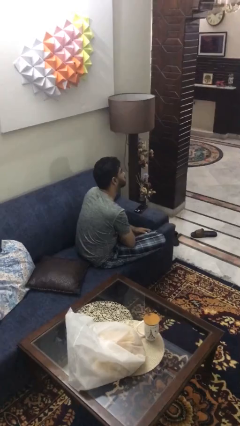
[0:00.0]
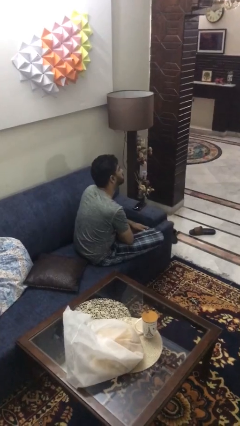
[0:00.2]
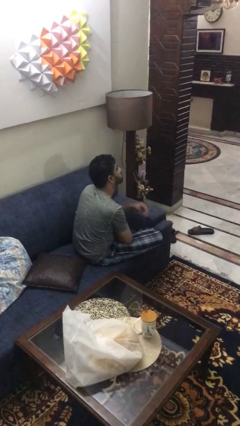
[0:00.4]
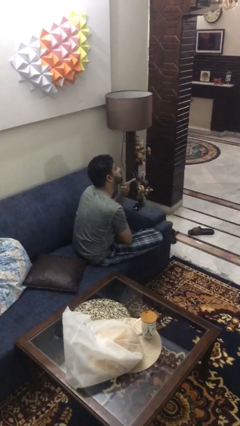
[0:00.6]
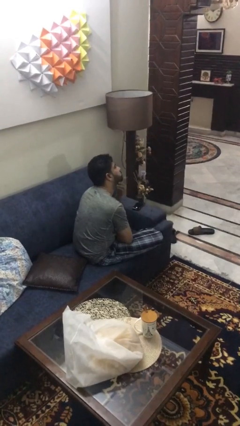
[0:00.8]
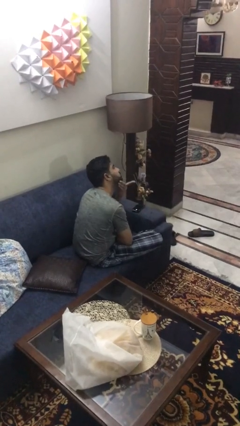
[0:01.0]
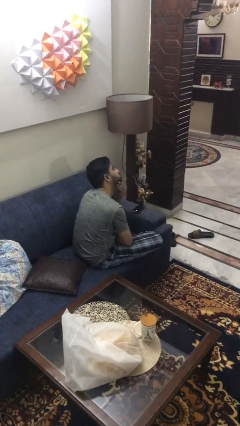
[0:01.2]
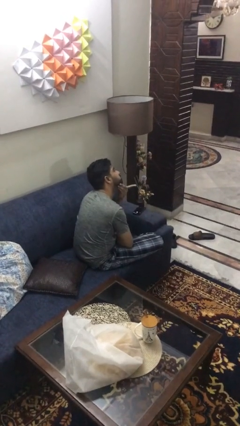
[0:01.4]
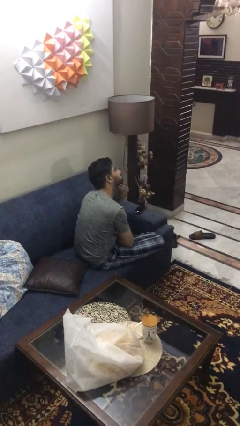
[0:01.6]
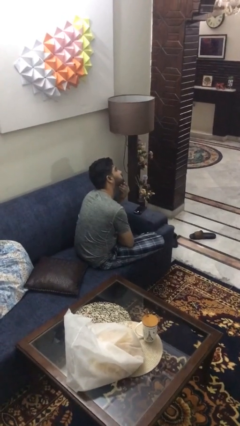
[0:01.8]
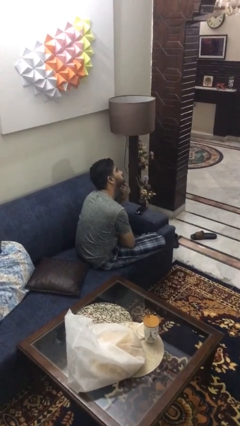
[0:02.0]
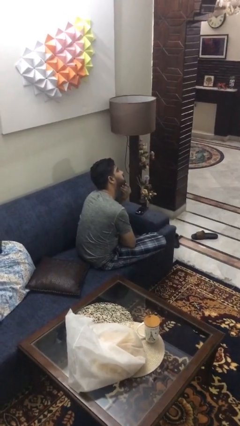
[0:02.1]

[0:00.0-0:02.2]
person strokes chin

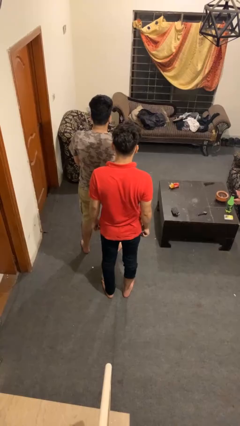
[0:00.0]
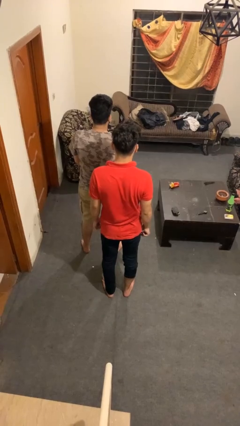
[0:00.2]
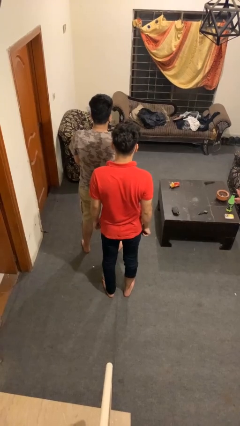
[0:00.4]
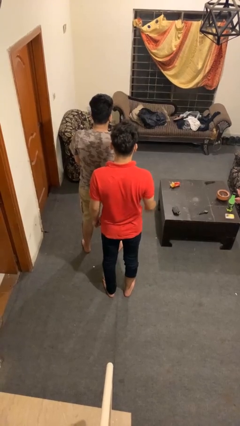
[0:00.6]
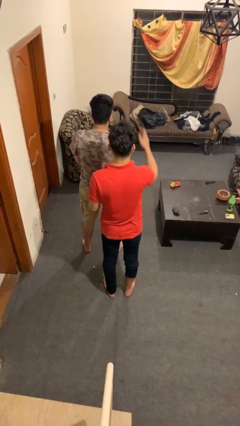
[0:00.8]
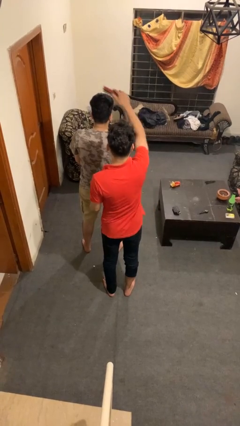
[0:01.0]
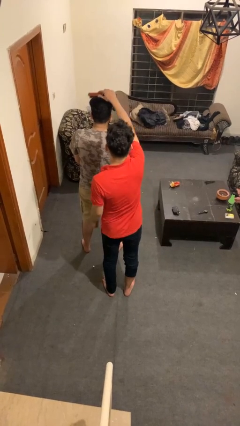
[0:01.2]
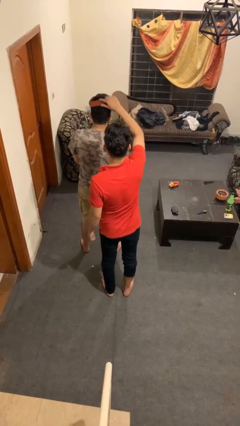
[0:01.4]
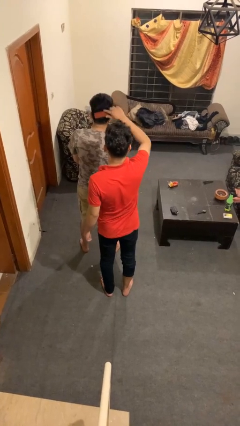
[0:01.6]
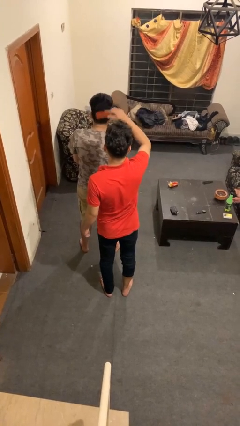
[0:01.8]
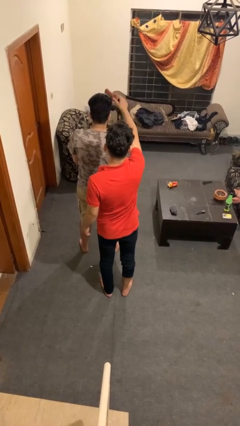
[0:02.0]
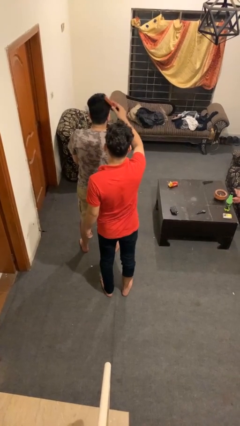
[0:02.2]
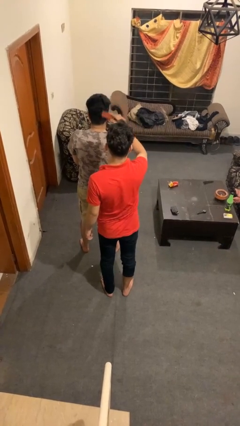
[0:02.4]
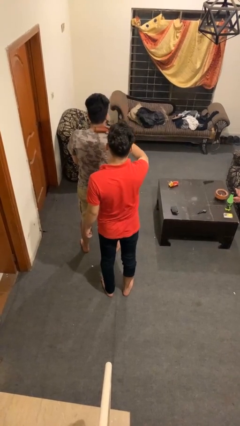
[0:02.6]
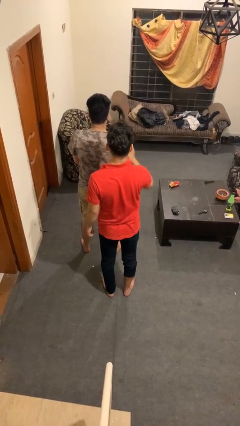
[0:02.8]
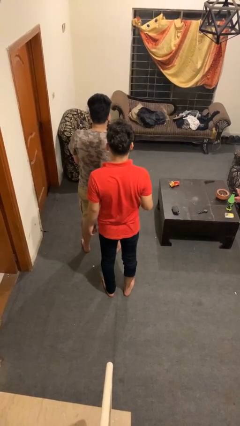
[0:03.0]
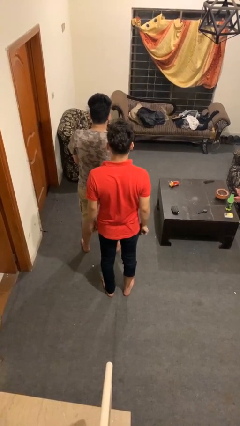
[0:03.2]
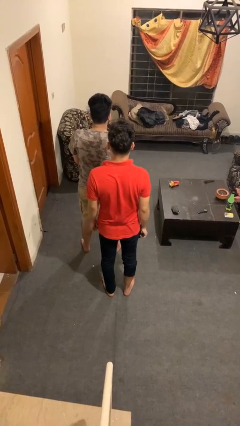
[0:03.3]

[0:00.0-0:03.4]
person brushes hair of person

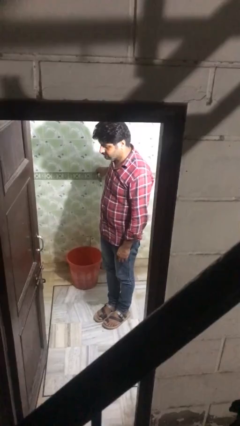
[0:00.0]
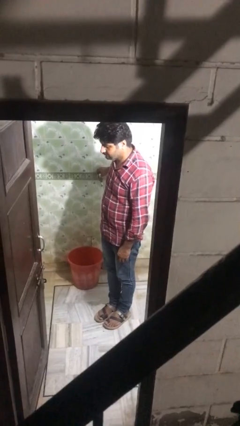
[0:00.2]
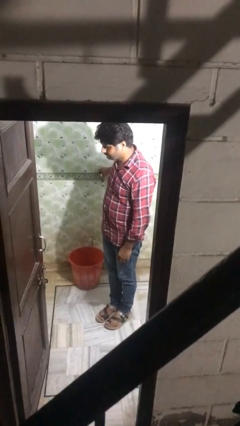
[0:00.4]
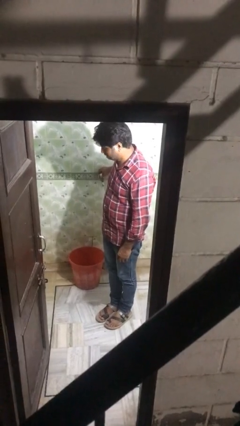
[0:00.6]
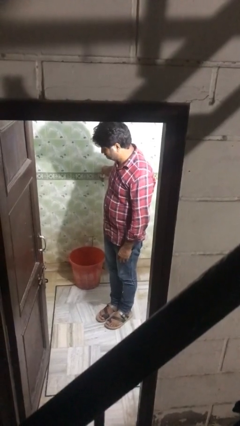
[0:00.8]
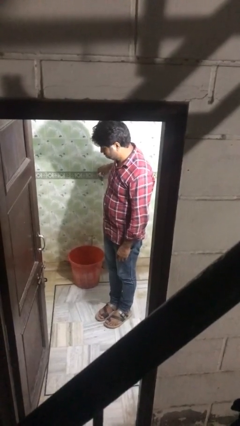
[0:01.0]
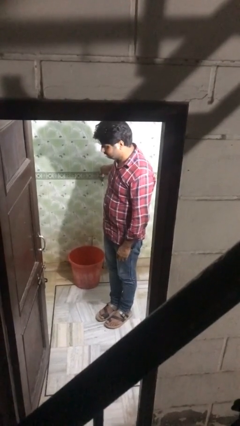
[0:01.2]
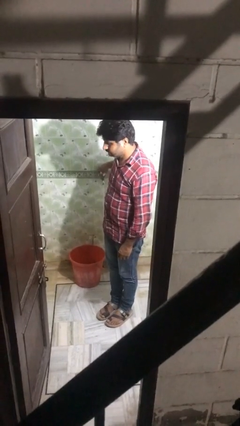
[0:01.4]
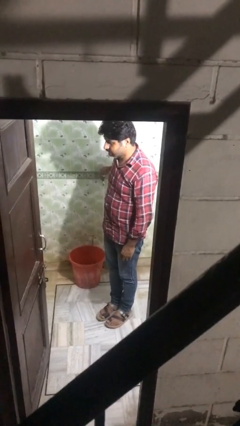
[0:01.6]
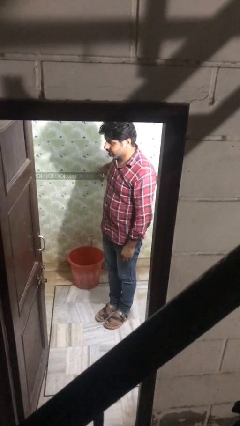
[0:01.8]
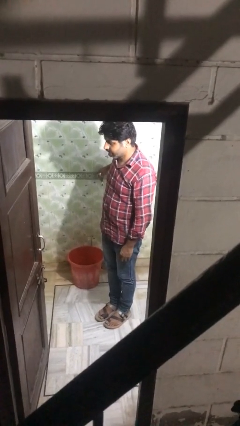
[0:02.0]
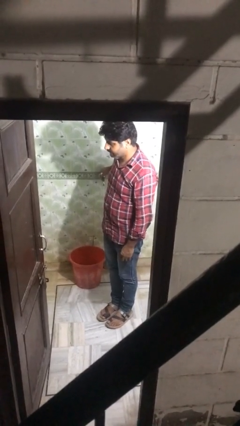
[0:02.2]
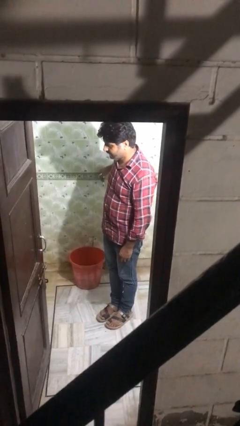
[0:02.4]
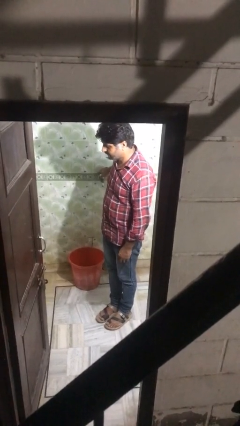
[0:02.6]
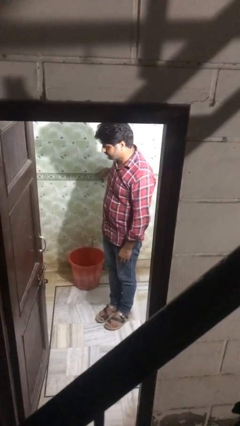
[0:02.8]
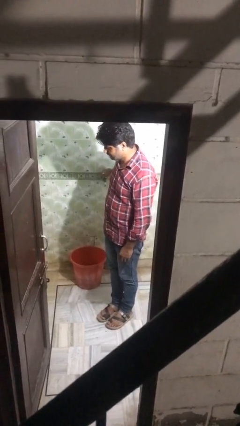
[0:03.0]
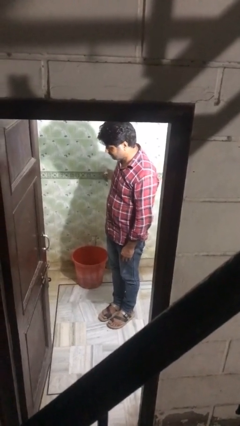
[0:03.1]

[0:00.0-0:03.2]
person turns off faucet

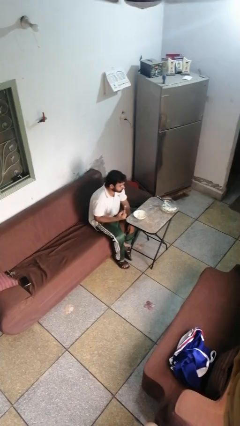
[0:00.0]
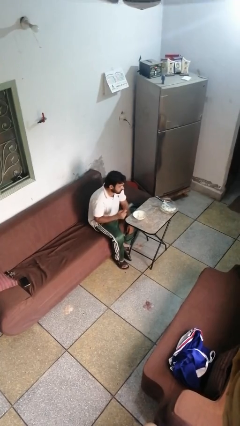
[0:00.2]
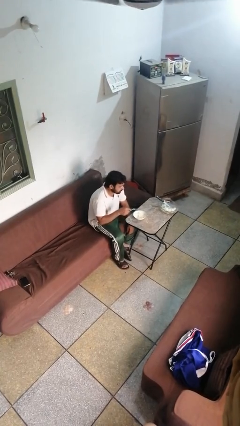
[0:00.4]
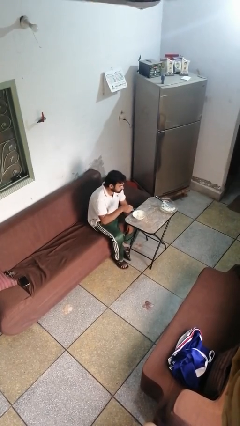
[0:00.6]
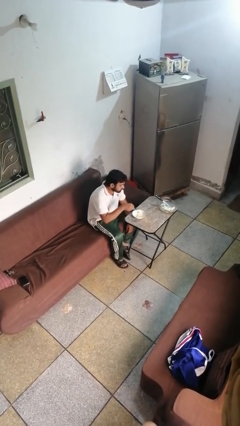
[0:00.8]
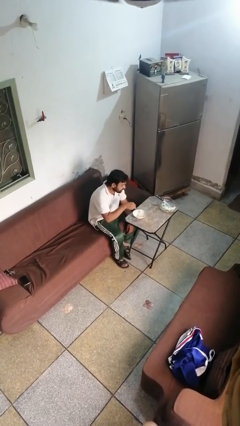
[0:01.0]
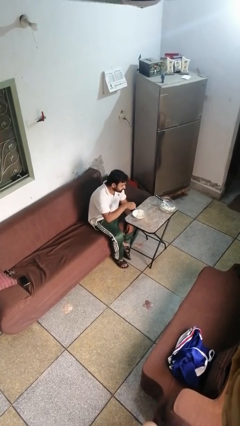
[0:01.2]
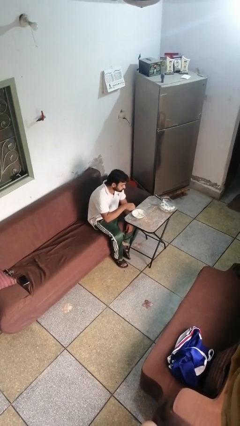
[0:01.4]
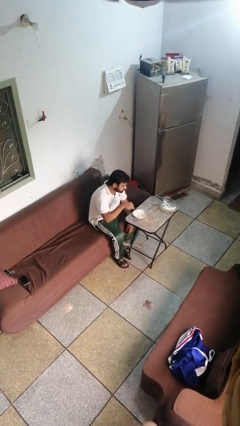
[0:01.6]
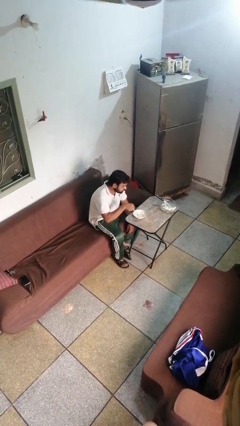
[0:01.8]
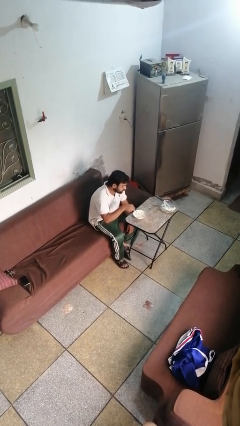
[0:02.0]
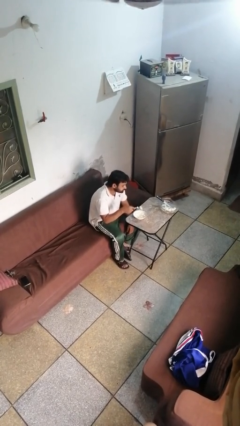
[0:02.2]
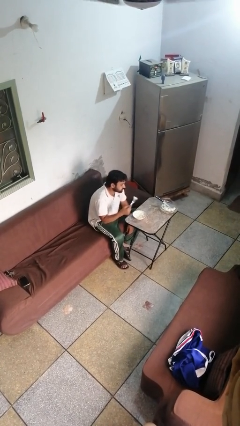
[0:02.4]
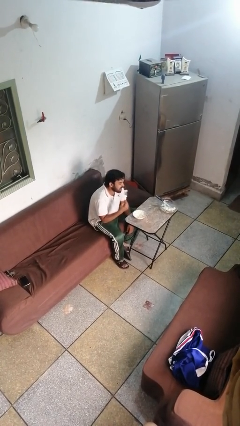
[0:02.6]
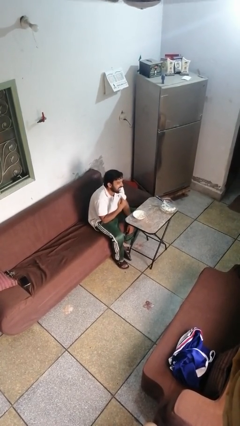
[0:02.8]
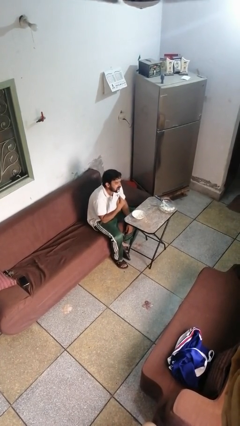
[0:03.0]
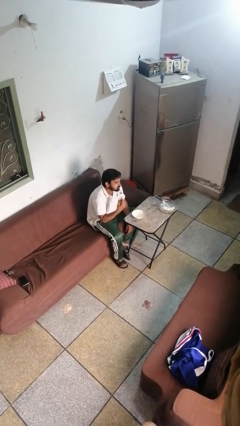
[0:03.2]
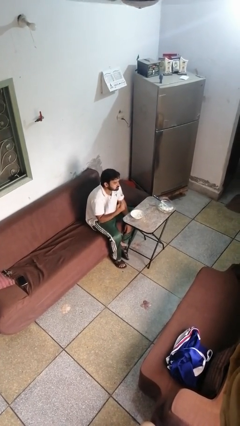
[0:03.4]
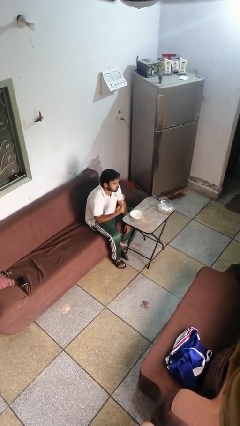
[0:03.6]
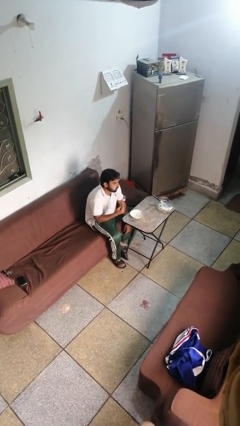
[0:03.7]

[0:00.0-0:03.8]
person eats with utensil

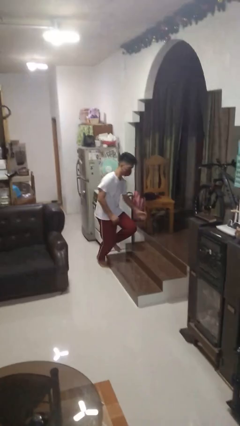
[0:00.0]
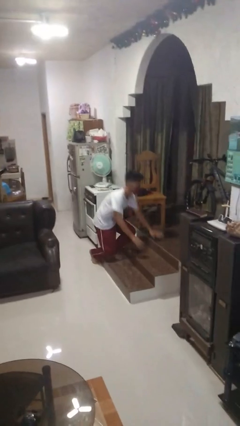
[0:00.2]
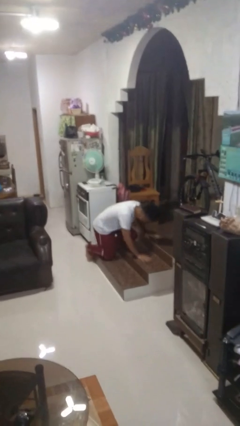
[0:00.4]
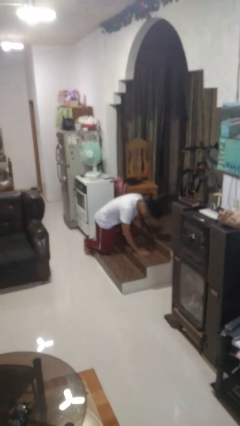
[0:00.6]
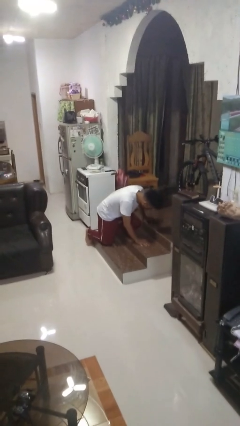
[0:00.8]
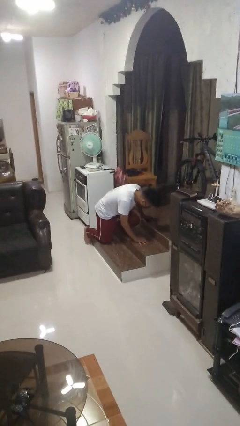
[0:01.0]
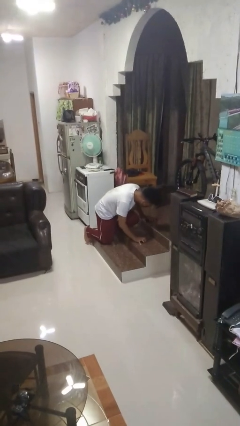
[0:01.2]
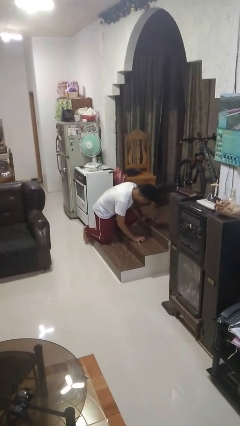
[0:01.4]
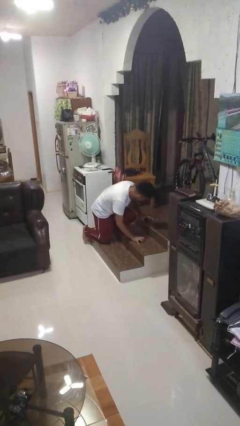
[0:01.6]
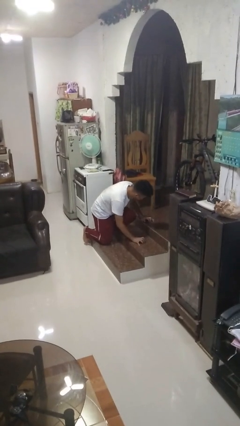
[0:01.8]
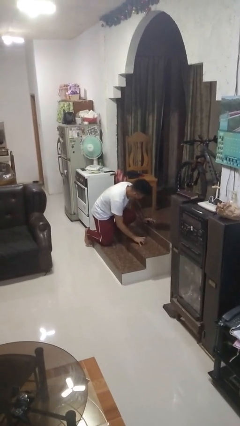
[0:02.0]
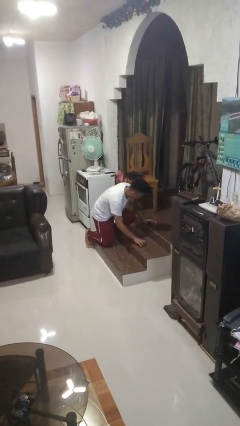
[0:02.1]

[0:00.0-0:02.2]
person trips on object on floor

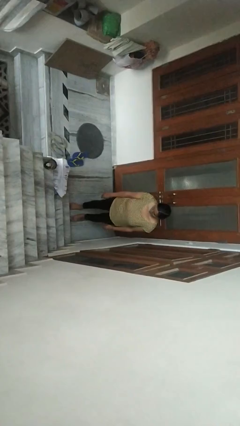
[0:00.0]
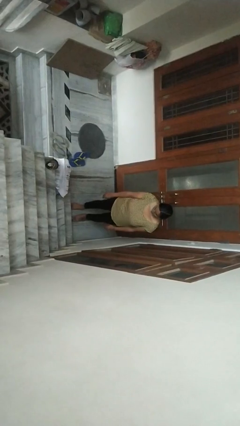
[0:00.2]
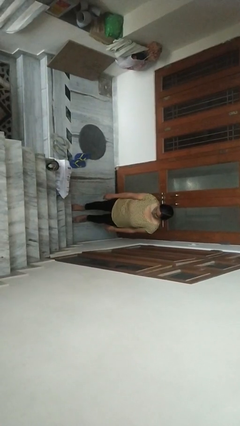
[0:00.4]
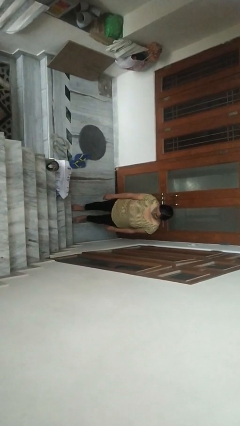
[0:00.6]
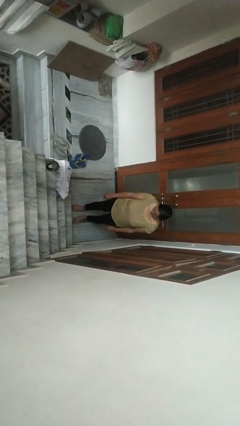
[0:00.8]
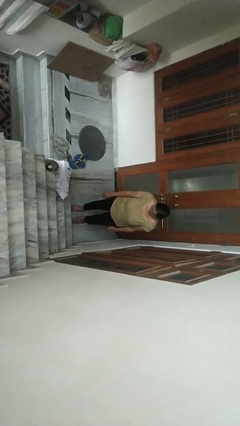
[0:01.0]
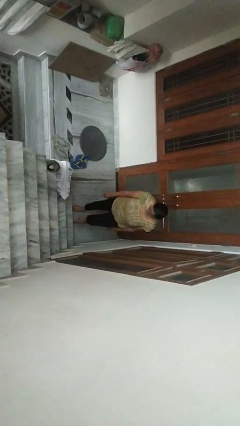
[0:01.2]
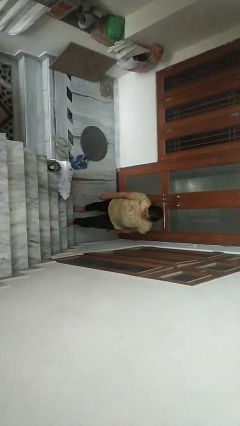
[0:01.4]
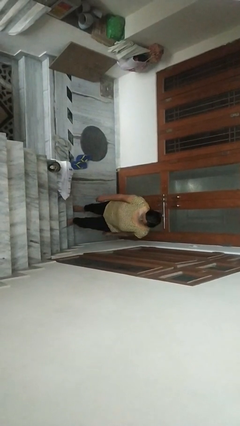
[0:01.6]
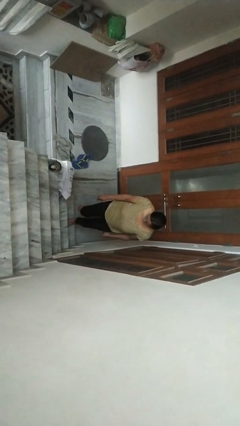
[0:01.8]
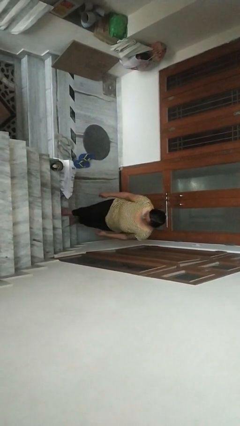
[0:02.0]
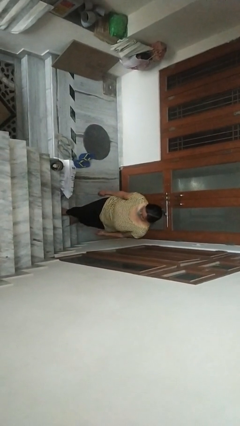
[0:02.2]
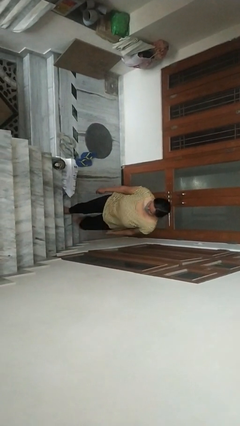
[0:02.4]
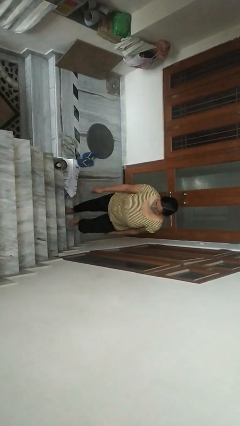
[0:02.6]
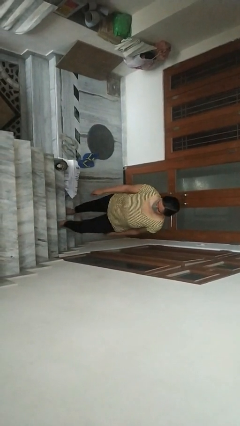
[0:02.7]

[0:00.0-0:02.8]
person climbs up stairs
